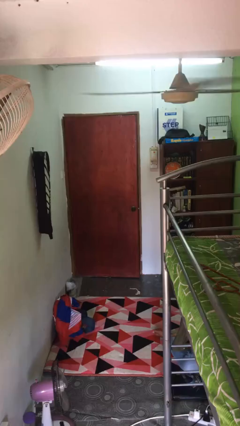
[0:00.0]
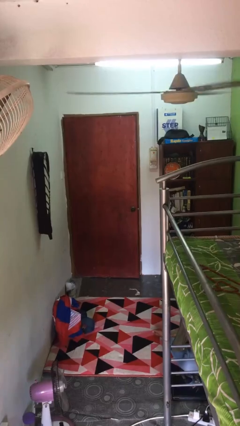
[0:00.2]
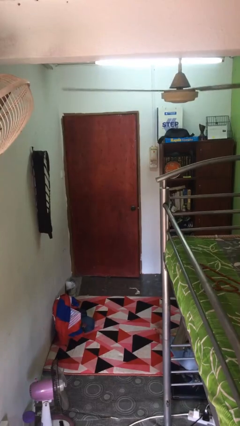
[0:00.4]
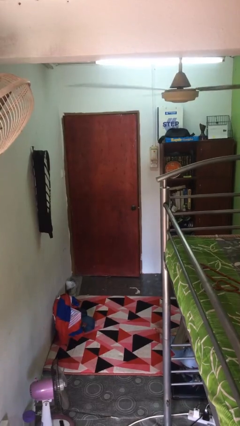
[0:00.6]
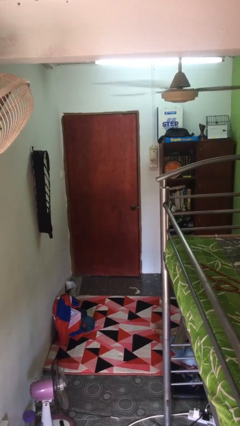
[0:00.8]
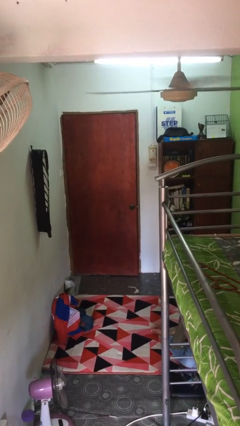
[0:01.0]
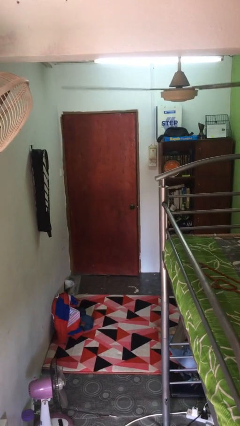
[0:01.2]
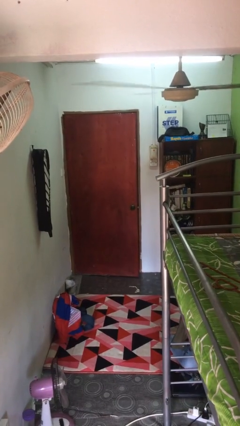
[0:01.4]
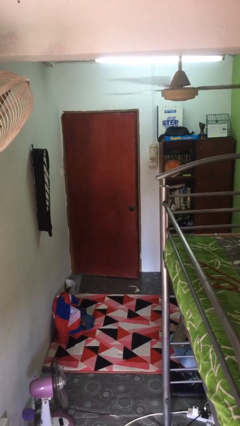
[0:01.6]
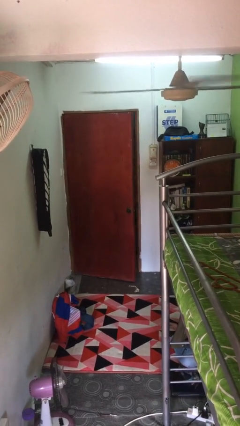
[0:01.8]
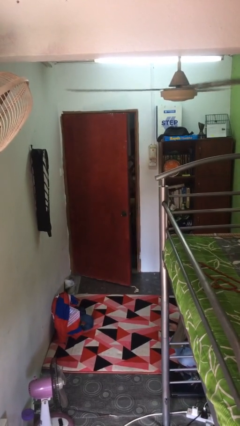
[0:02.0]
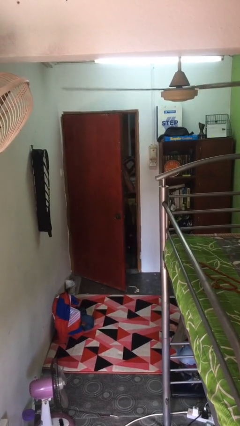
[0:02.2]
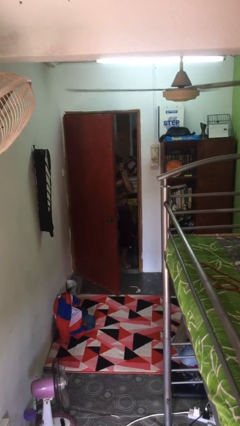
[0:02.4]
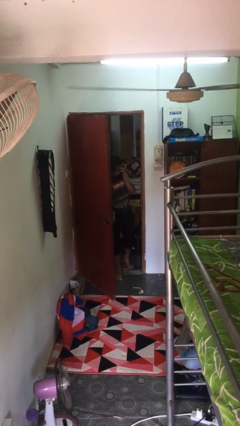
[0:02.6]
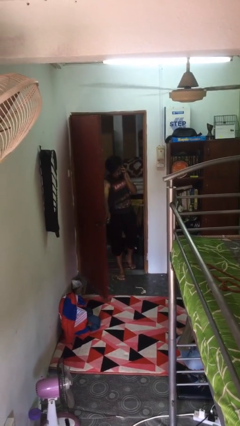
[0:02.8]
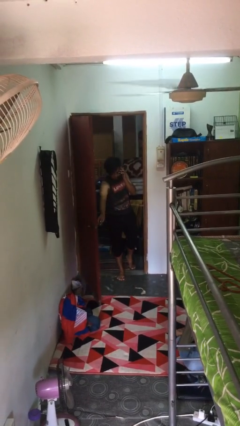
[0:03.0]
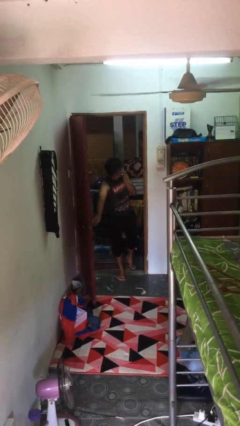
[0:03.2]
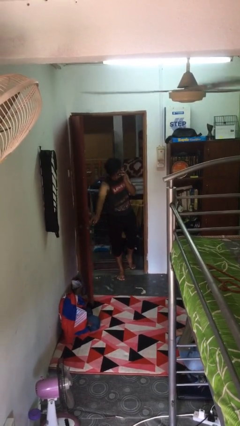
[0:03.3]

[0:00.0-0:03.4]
person opens facility door

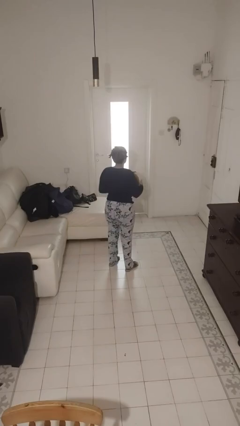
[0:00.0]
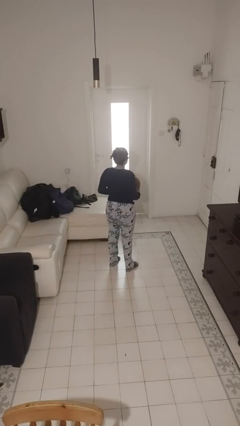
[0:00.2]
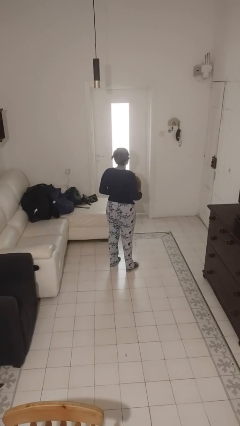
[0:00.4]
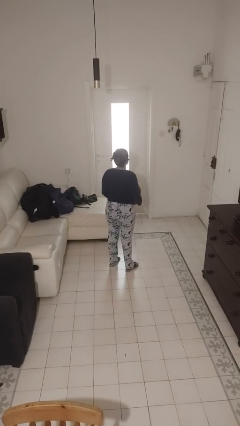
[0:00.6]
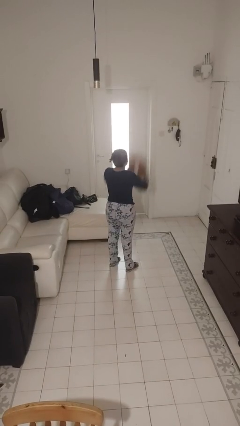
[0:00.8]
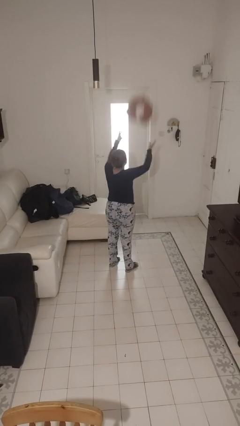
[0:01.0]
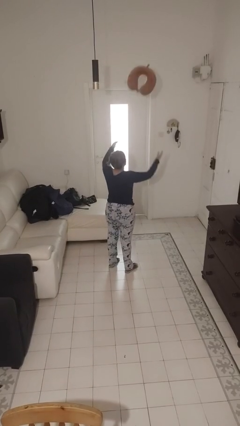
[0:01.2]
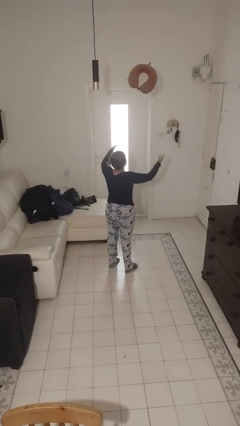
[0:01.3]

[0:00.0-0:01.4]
person drops object

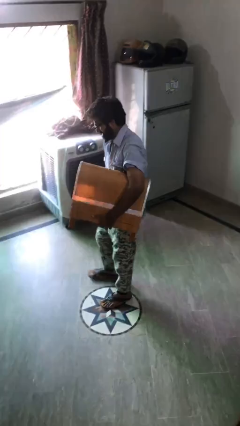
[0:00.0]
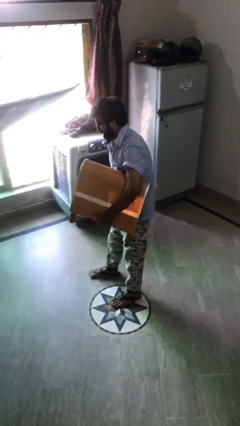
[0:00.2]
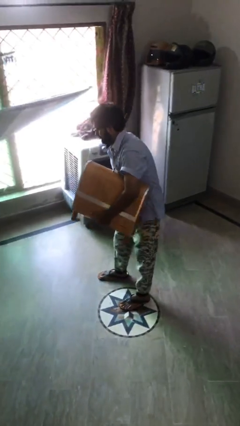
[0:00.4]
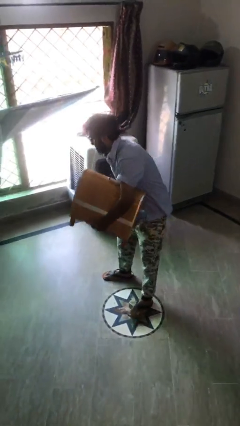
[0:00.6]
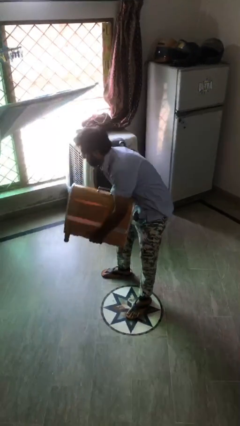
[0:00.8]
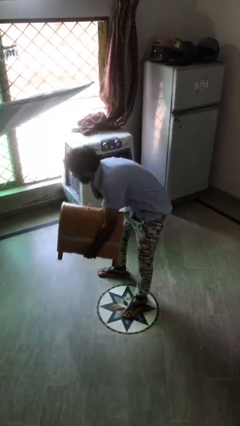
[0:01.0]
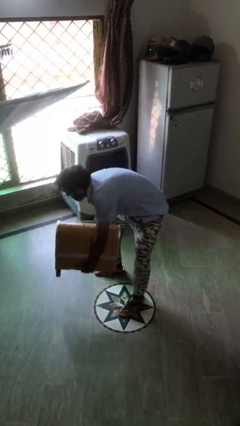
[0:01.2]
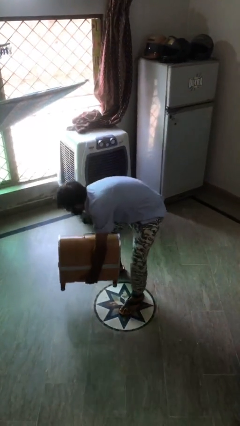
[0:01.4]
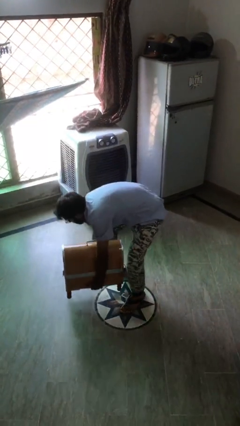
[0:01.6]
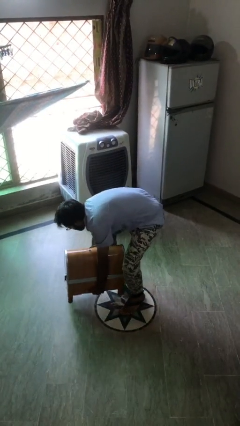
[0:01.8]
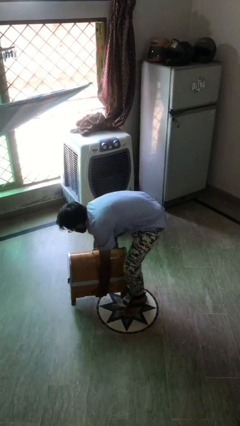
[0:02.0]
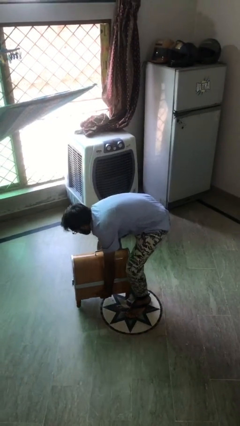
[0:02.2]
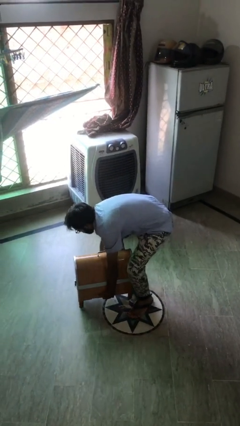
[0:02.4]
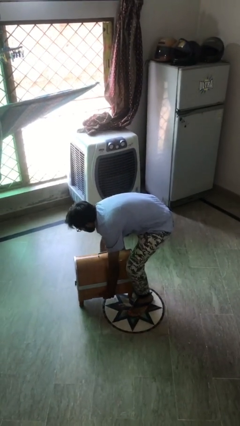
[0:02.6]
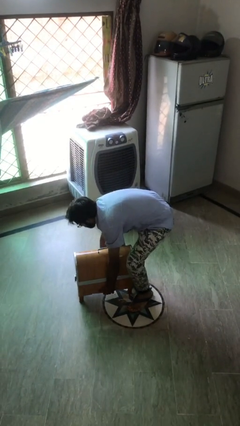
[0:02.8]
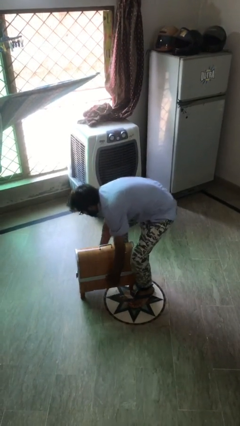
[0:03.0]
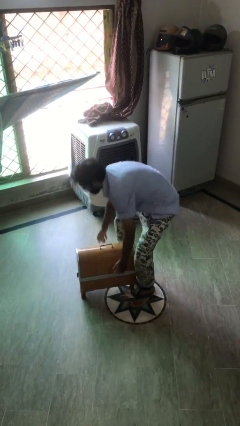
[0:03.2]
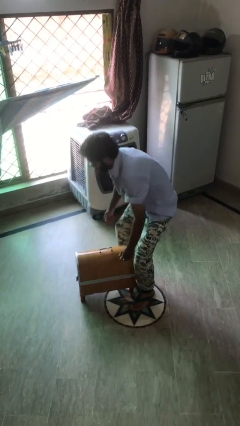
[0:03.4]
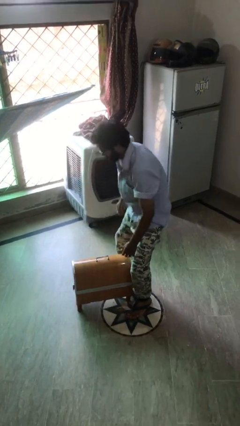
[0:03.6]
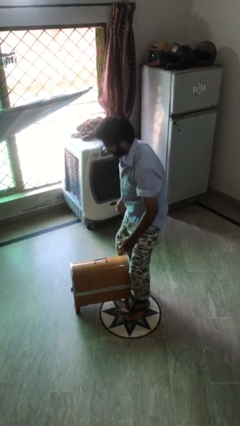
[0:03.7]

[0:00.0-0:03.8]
person puts down object on floor

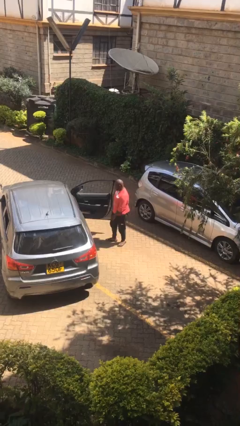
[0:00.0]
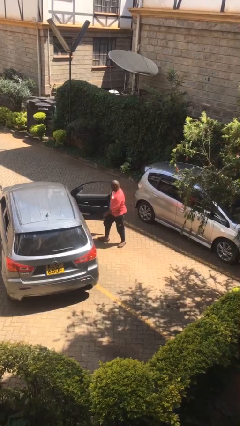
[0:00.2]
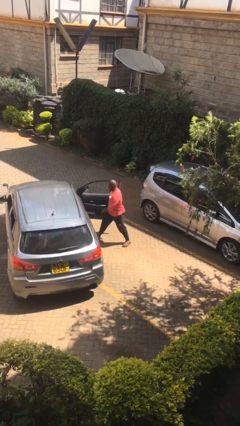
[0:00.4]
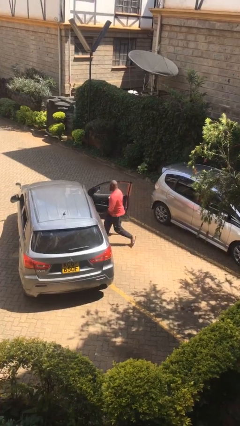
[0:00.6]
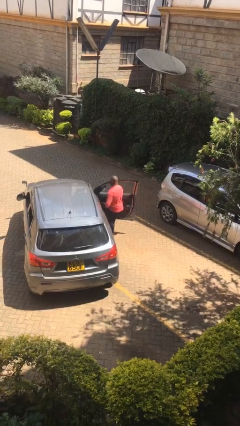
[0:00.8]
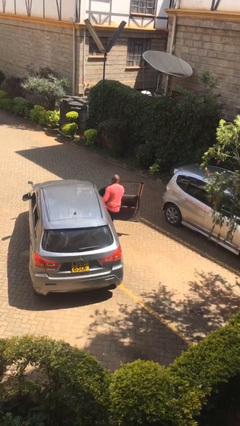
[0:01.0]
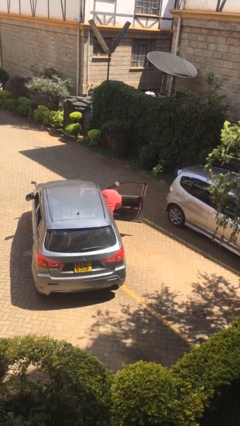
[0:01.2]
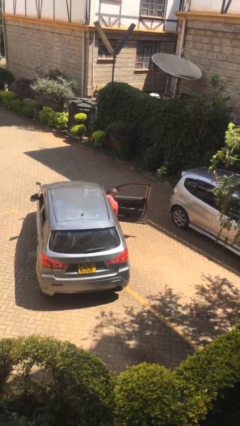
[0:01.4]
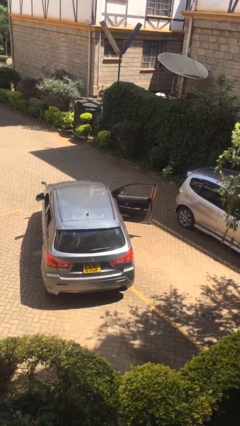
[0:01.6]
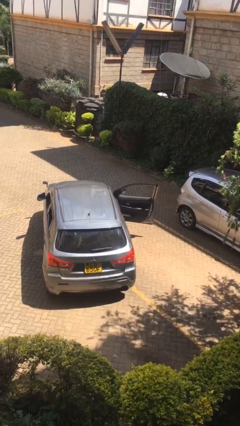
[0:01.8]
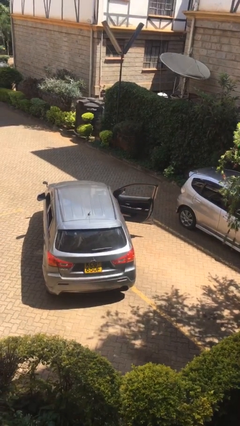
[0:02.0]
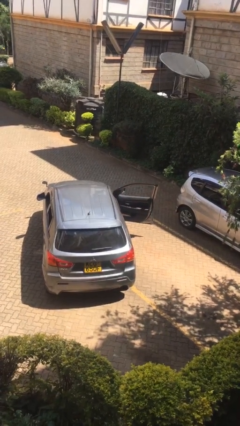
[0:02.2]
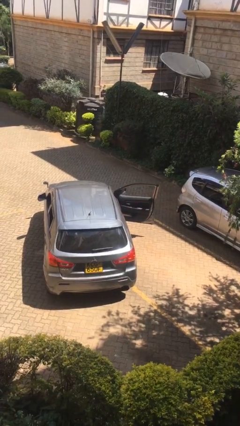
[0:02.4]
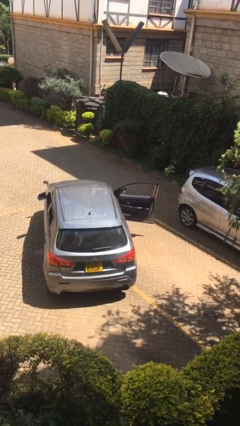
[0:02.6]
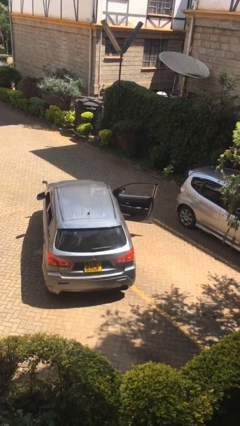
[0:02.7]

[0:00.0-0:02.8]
person enters car

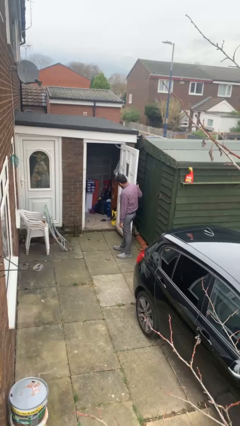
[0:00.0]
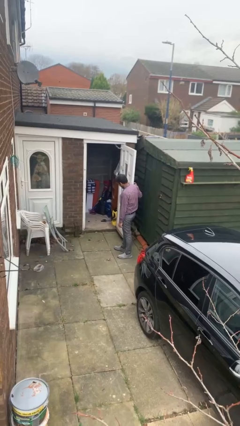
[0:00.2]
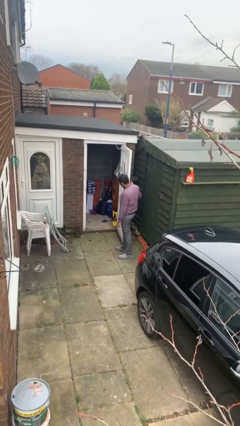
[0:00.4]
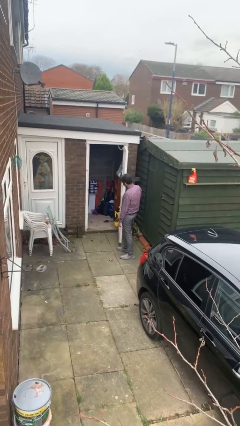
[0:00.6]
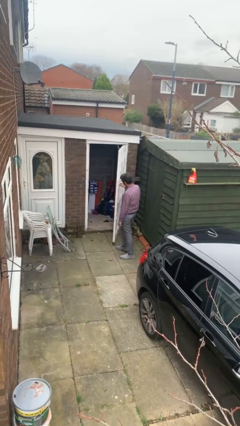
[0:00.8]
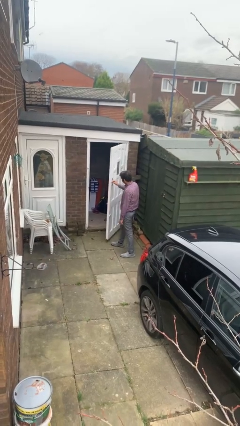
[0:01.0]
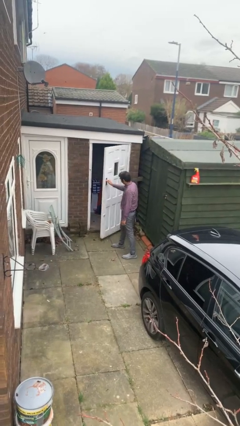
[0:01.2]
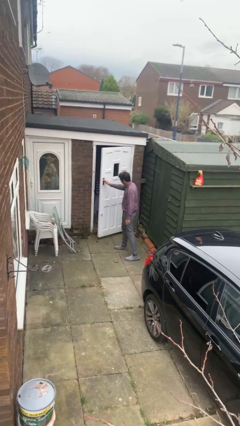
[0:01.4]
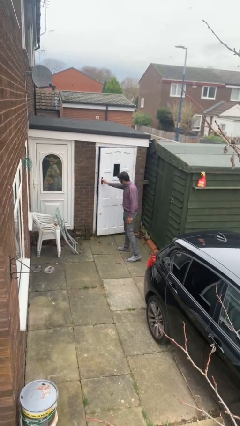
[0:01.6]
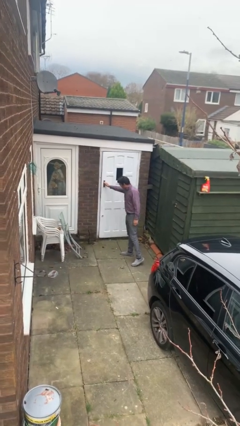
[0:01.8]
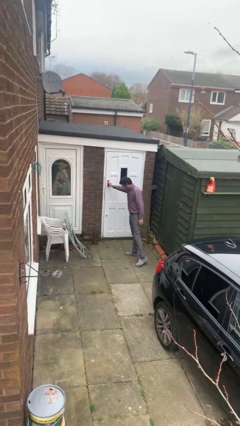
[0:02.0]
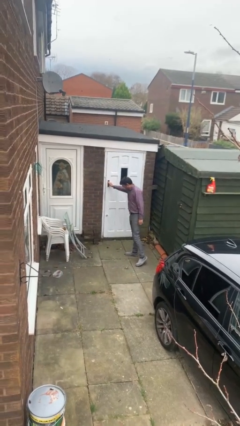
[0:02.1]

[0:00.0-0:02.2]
person closes facility door

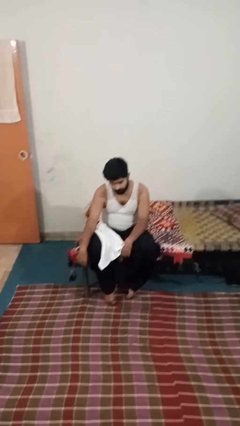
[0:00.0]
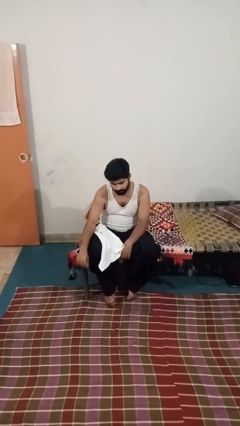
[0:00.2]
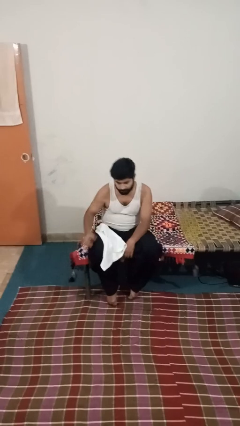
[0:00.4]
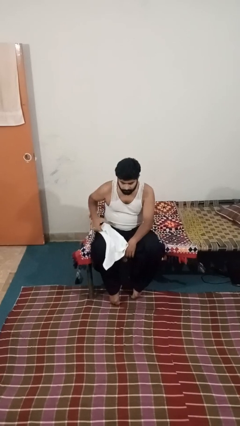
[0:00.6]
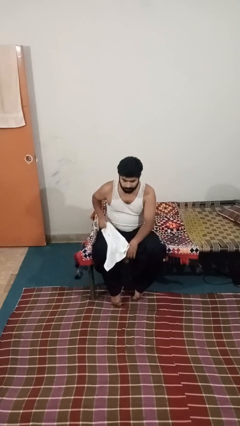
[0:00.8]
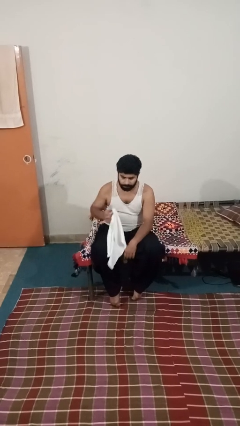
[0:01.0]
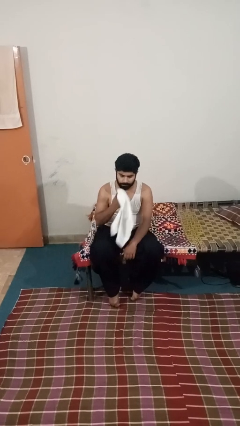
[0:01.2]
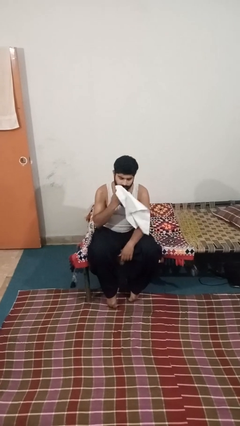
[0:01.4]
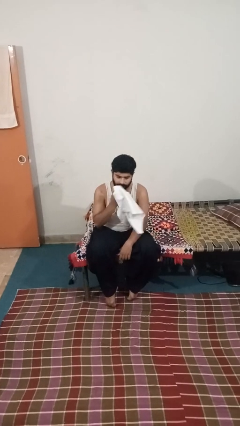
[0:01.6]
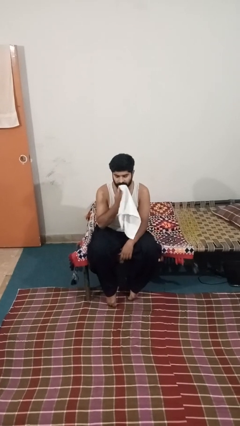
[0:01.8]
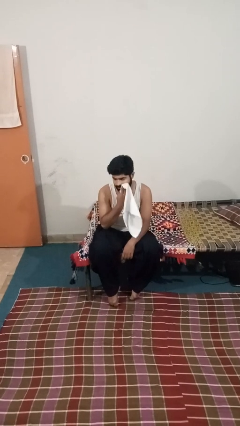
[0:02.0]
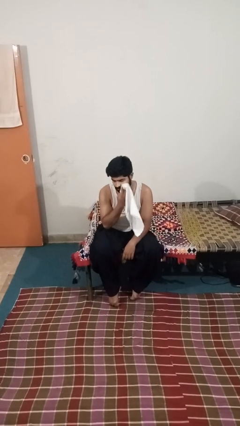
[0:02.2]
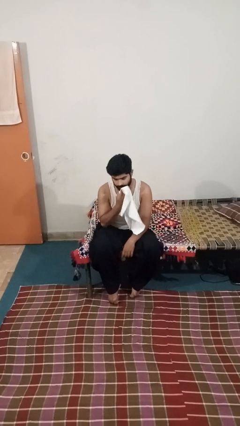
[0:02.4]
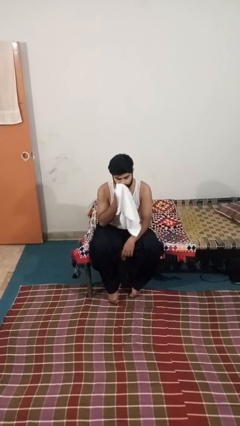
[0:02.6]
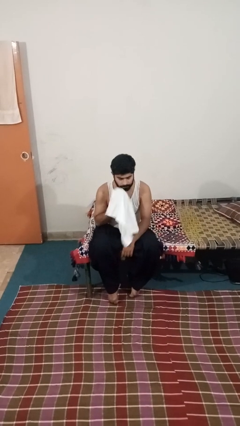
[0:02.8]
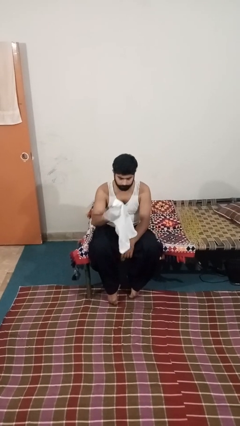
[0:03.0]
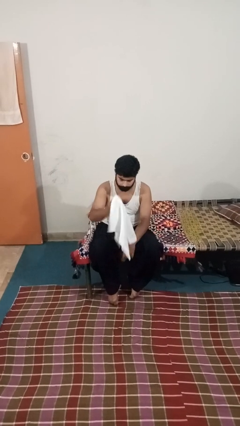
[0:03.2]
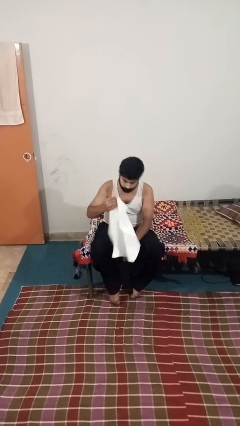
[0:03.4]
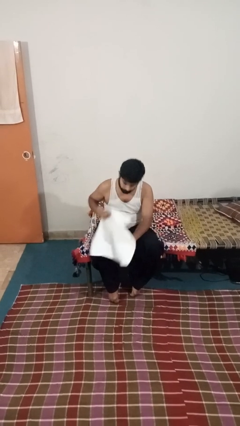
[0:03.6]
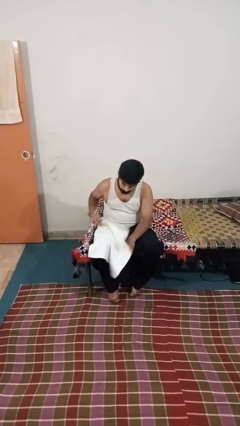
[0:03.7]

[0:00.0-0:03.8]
person wipes mouth with napkin

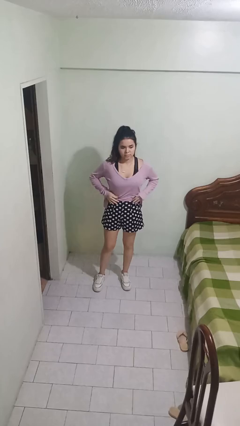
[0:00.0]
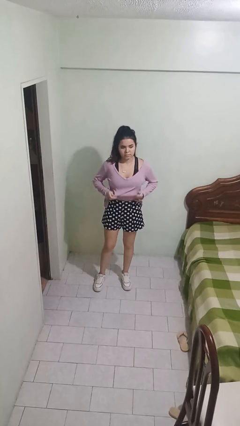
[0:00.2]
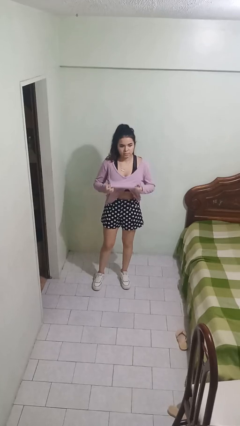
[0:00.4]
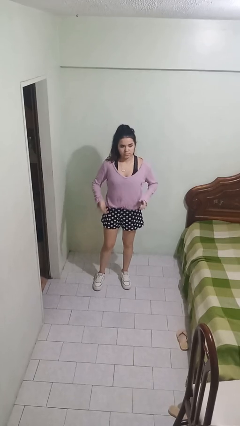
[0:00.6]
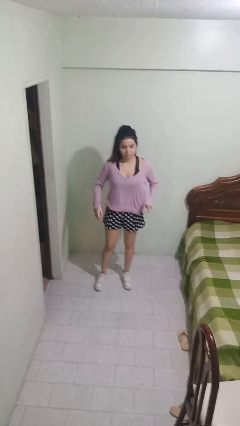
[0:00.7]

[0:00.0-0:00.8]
person untucks shirt
